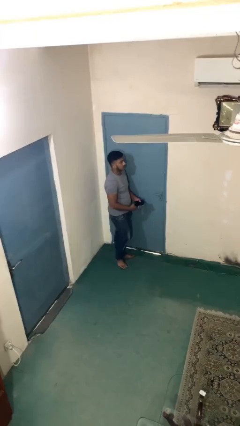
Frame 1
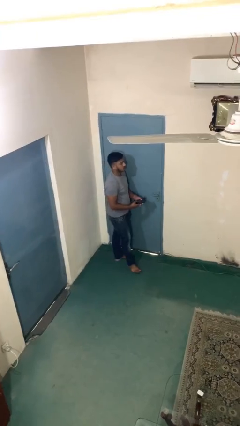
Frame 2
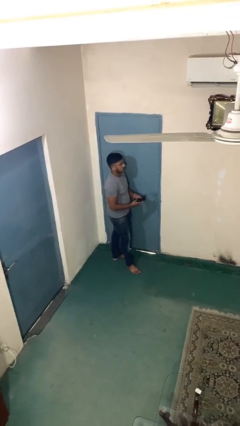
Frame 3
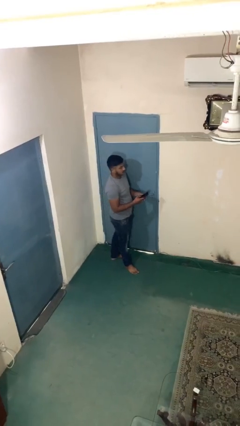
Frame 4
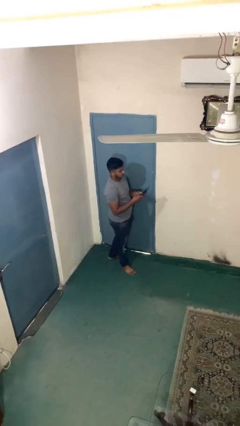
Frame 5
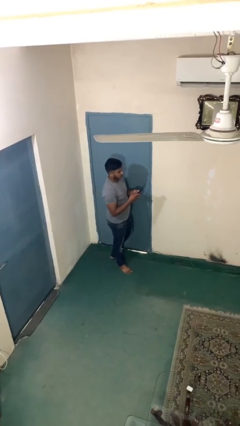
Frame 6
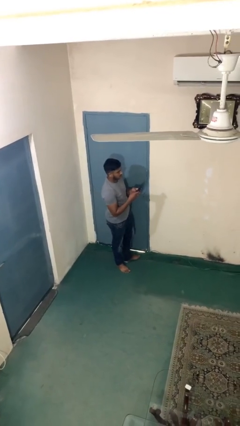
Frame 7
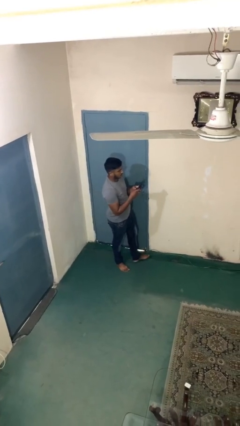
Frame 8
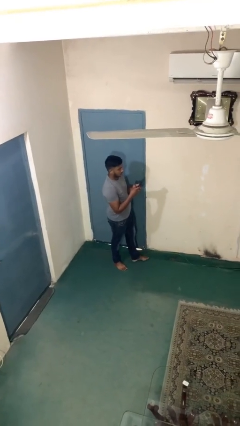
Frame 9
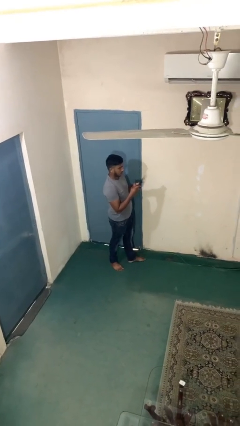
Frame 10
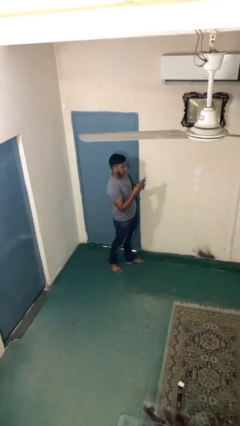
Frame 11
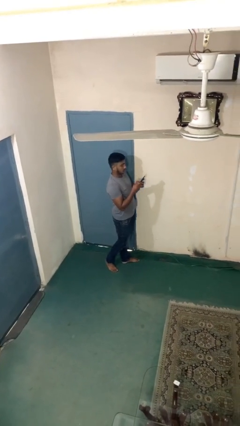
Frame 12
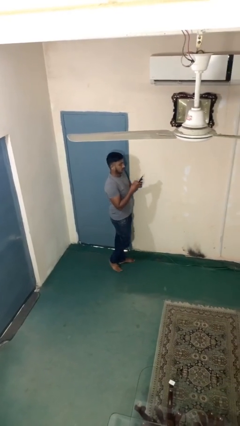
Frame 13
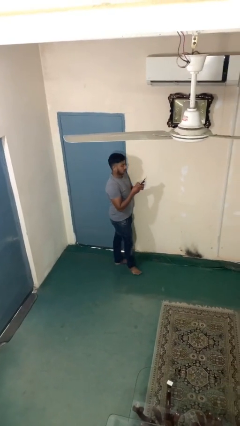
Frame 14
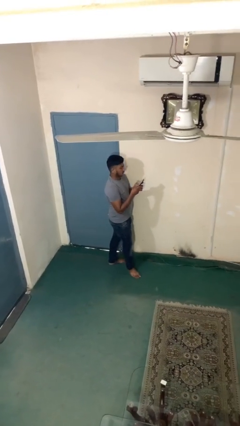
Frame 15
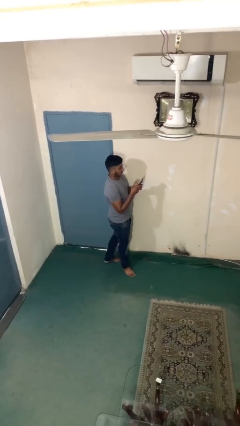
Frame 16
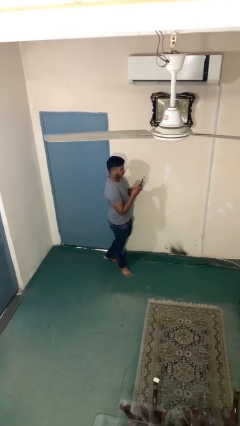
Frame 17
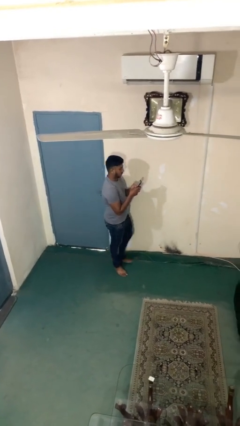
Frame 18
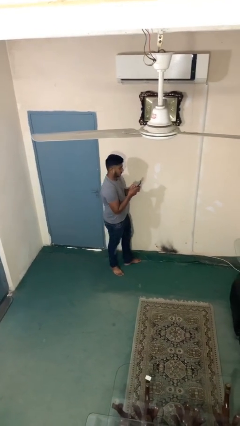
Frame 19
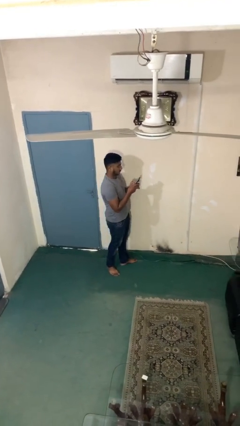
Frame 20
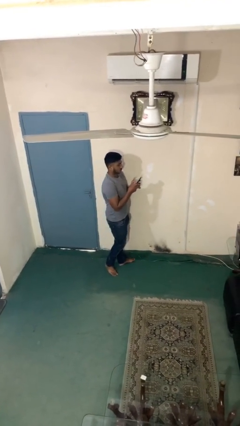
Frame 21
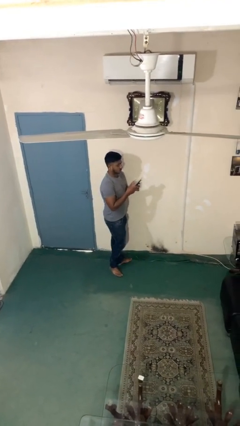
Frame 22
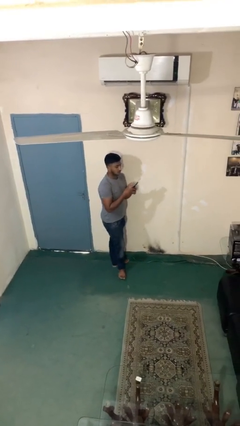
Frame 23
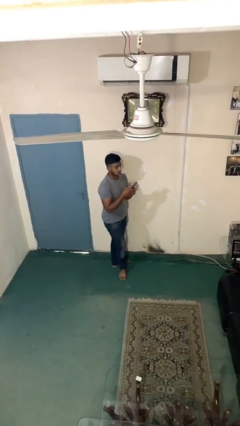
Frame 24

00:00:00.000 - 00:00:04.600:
person texts on phone

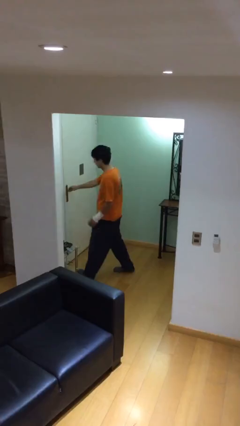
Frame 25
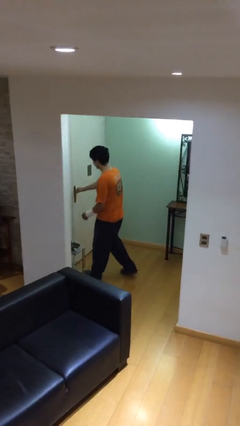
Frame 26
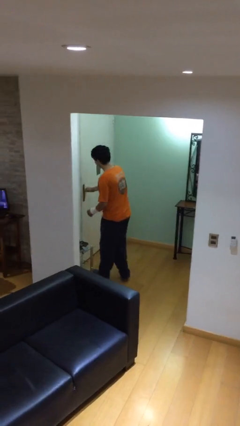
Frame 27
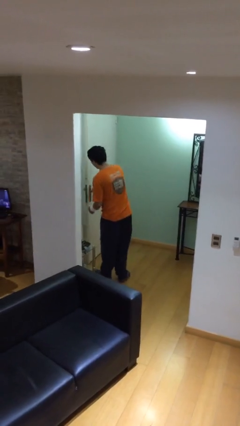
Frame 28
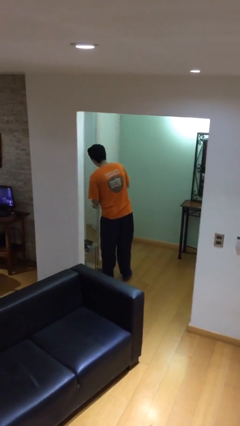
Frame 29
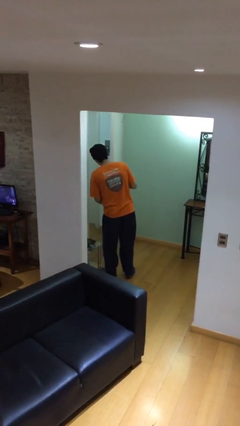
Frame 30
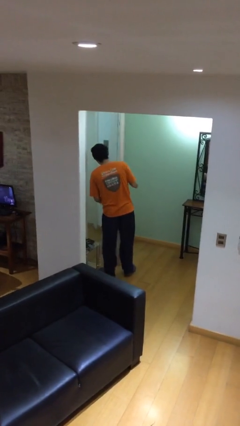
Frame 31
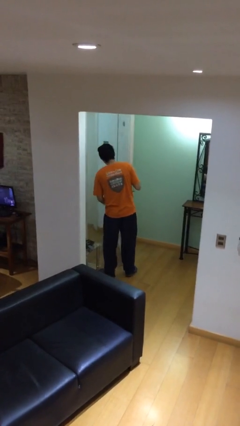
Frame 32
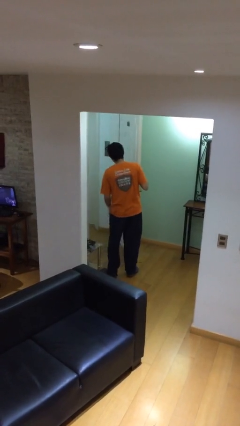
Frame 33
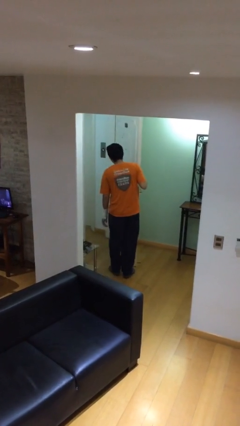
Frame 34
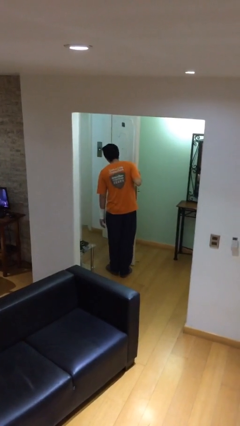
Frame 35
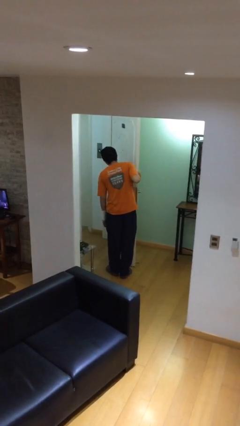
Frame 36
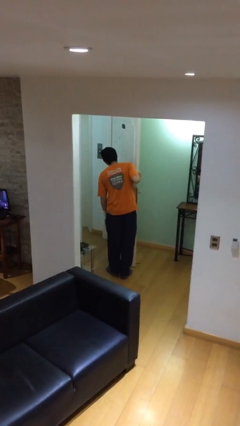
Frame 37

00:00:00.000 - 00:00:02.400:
person opens facility door

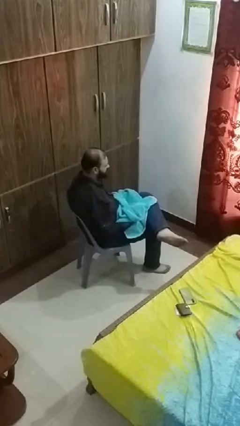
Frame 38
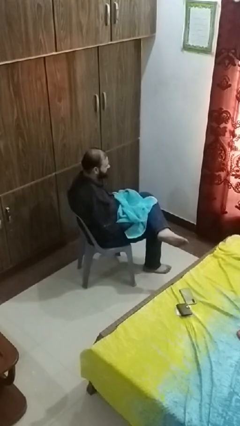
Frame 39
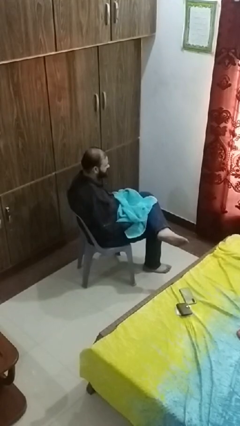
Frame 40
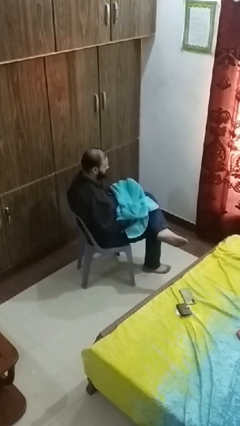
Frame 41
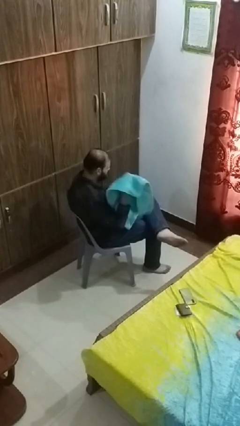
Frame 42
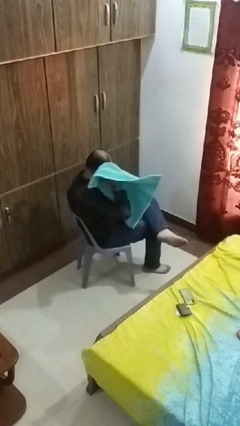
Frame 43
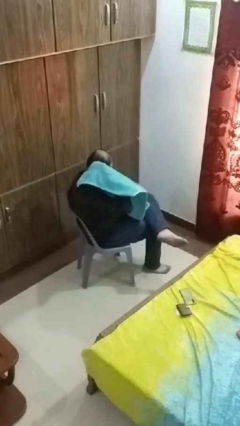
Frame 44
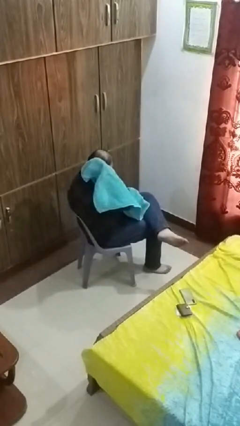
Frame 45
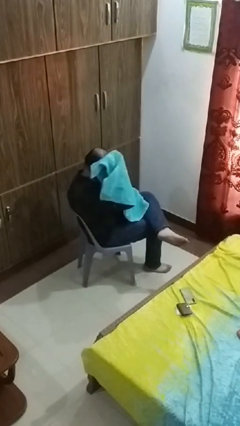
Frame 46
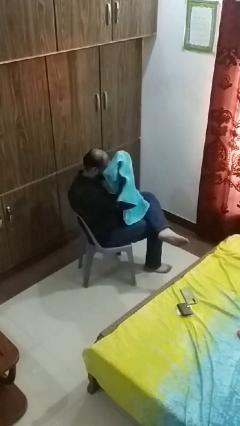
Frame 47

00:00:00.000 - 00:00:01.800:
person dries hair with towel

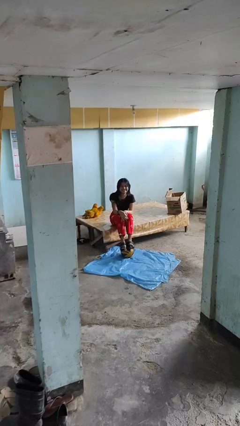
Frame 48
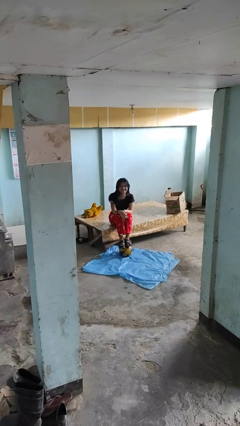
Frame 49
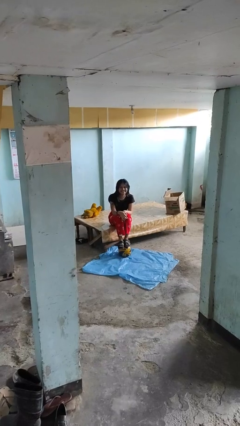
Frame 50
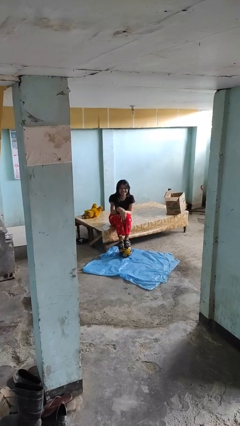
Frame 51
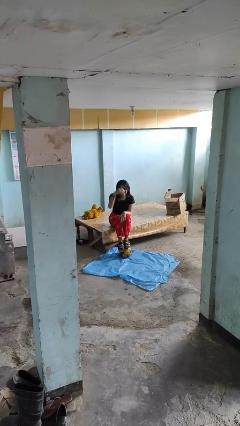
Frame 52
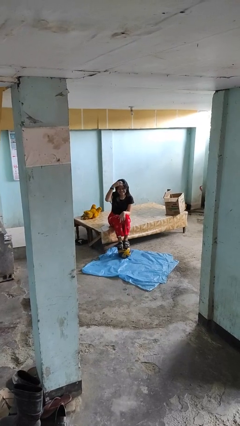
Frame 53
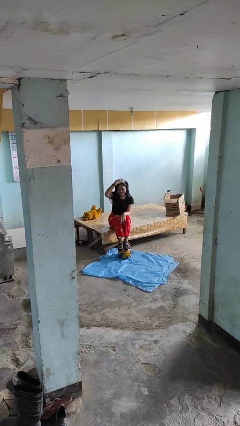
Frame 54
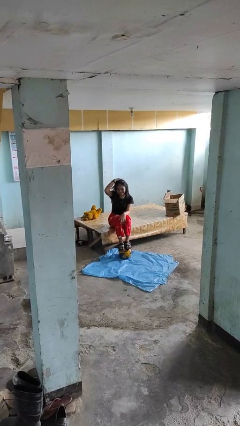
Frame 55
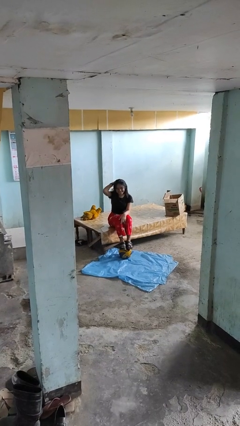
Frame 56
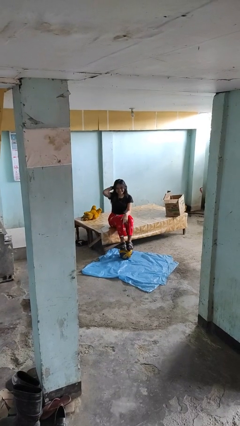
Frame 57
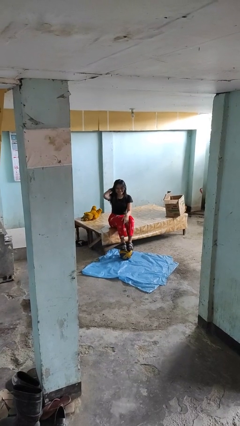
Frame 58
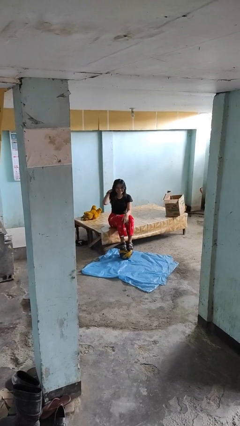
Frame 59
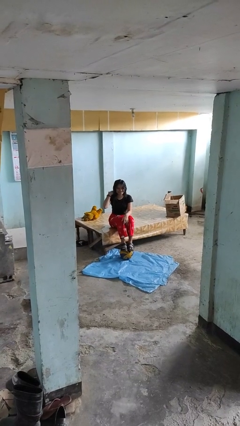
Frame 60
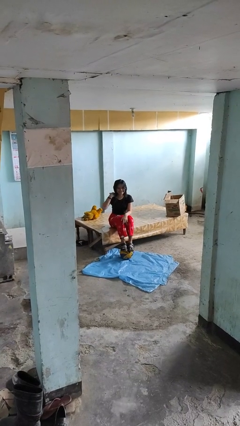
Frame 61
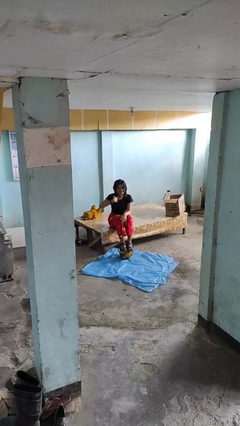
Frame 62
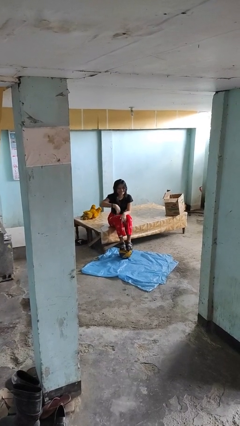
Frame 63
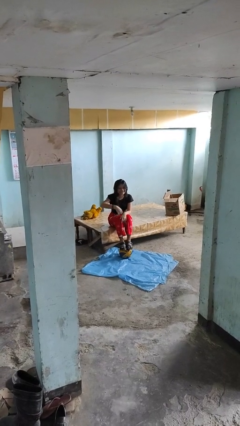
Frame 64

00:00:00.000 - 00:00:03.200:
person strokes hair

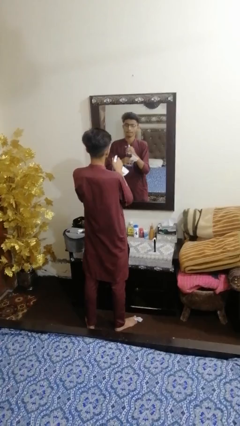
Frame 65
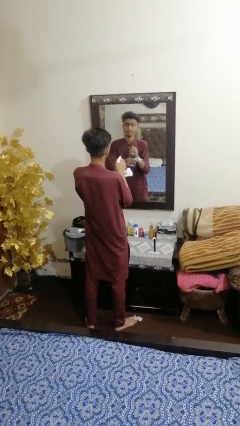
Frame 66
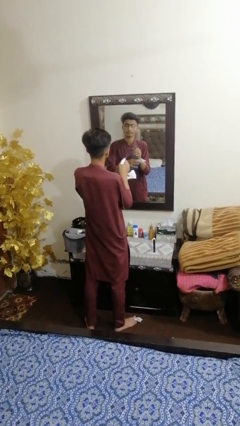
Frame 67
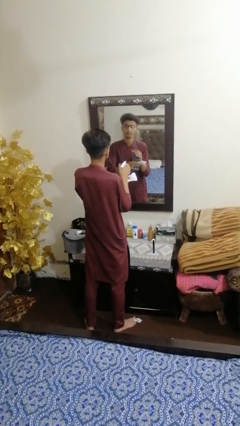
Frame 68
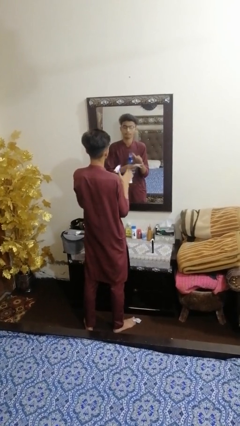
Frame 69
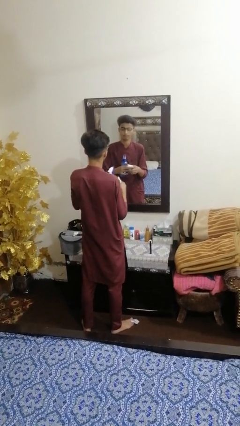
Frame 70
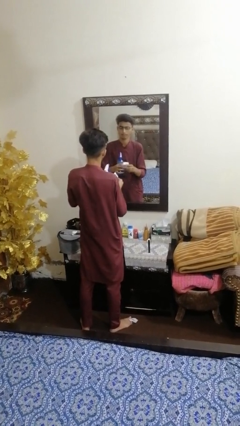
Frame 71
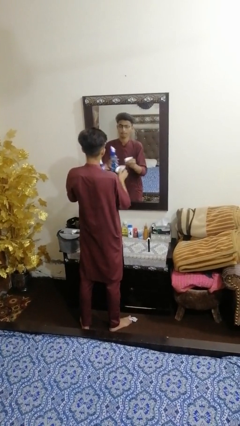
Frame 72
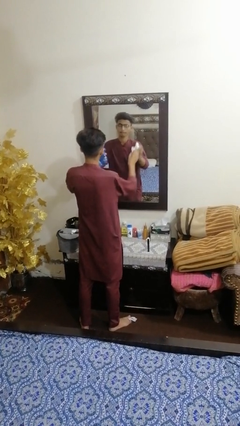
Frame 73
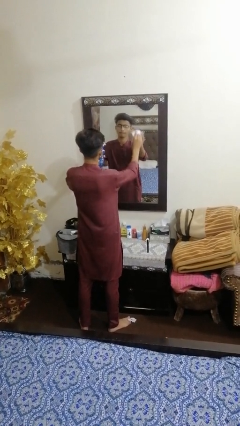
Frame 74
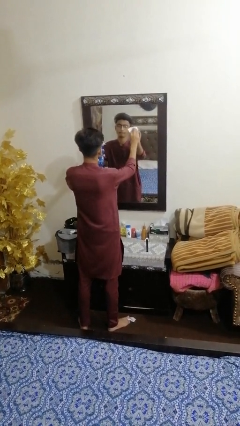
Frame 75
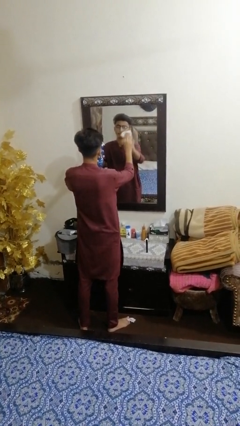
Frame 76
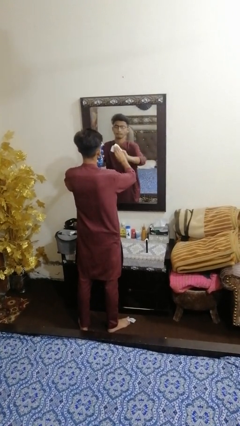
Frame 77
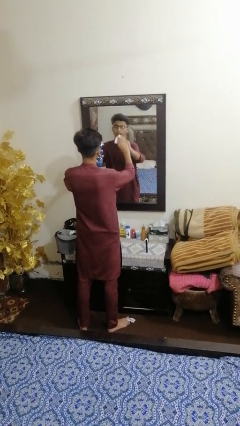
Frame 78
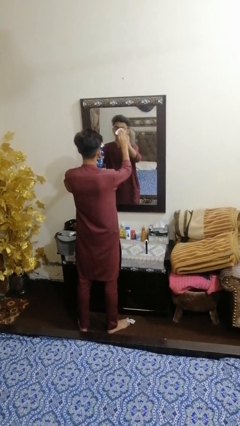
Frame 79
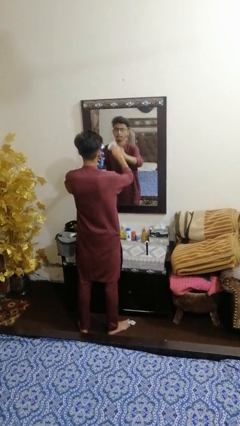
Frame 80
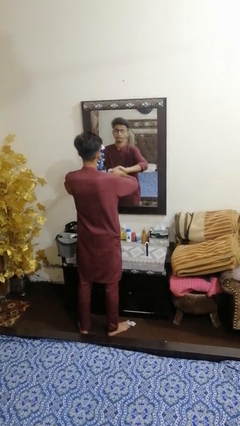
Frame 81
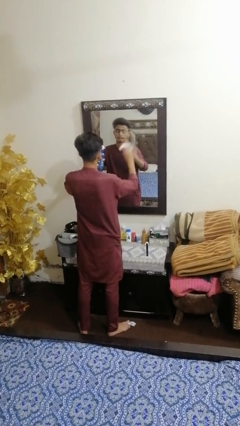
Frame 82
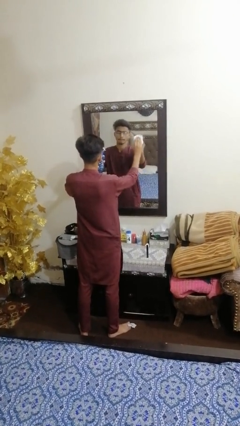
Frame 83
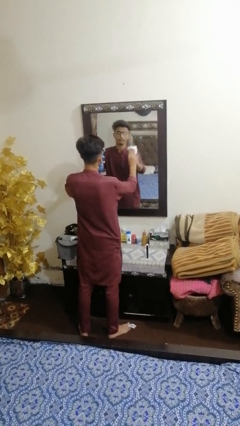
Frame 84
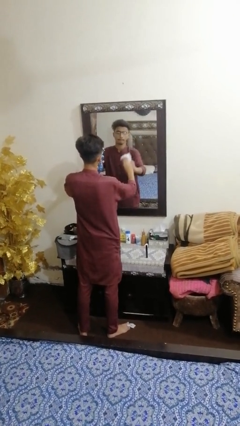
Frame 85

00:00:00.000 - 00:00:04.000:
person sprays from bottle

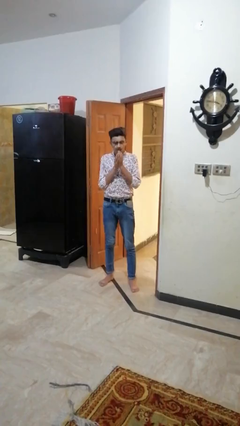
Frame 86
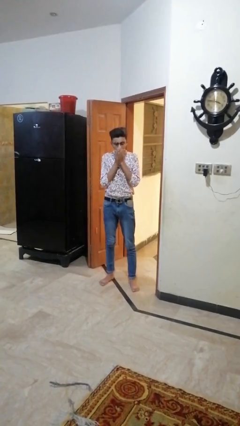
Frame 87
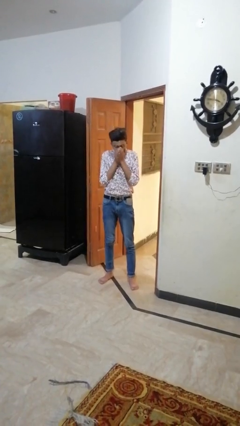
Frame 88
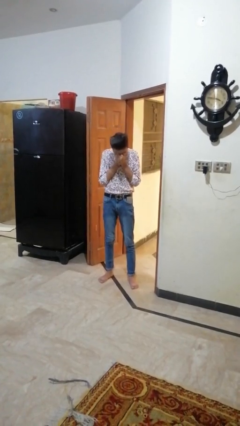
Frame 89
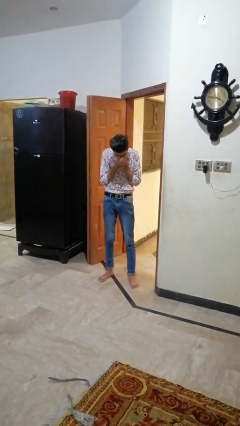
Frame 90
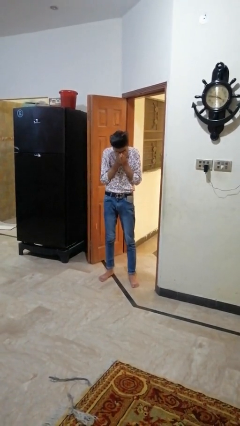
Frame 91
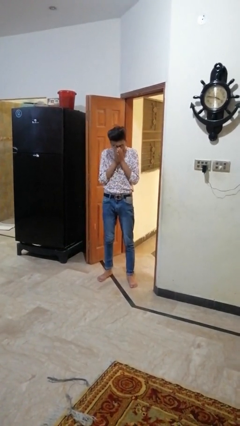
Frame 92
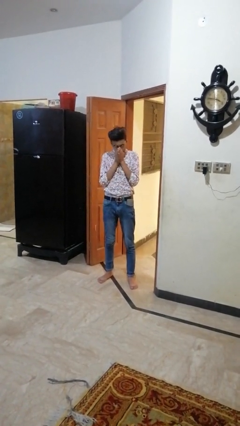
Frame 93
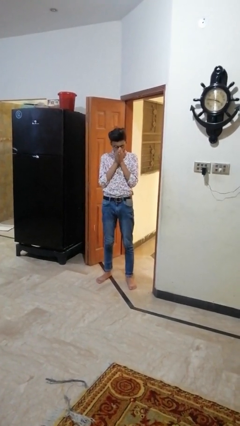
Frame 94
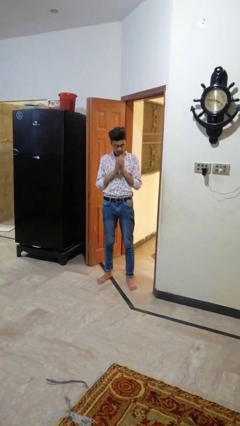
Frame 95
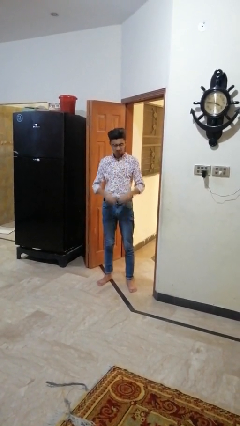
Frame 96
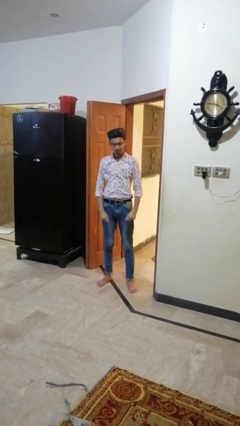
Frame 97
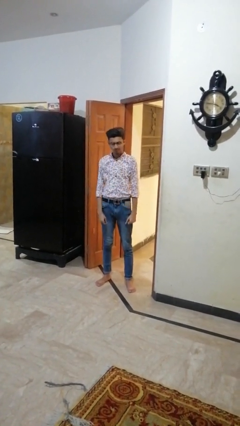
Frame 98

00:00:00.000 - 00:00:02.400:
person sneezes into hand
